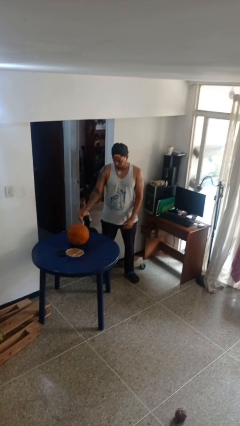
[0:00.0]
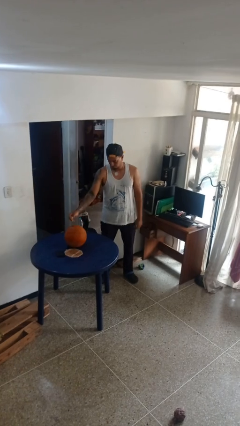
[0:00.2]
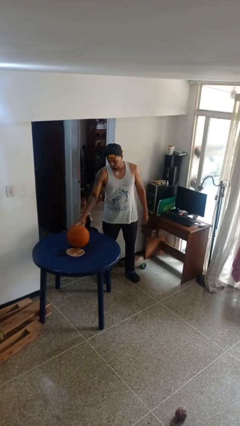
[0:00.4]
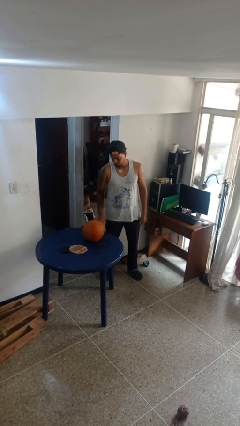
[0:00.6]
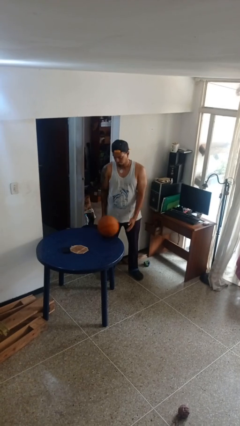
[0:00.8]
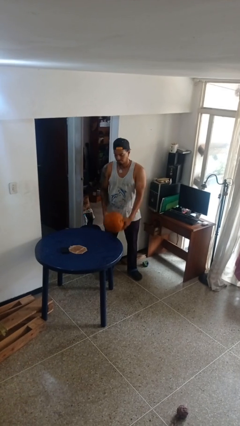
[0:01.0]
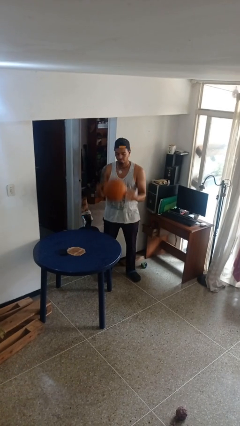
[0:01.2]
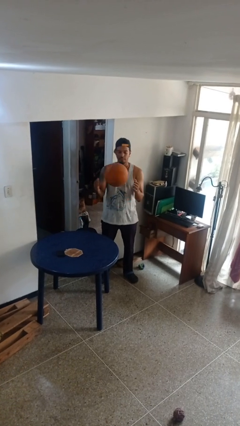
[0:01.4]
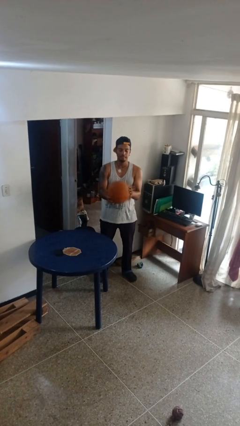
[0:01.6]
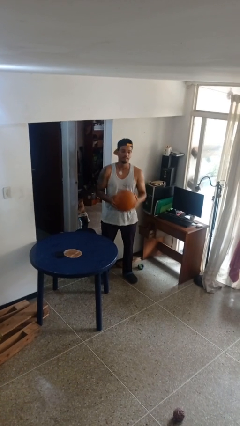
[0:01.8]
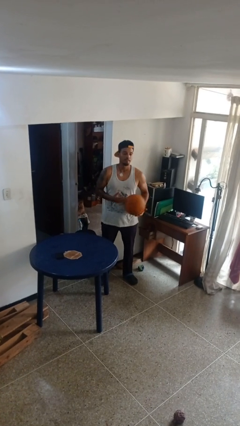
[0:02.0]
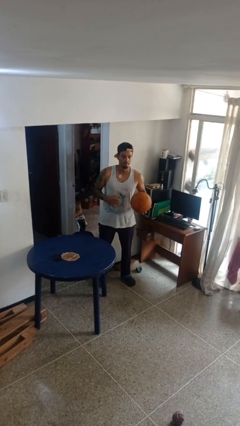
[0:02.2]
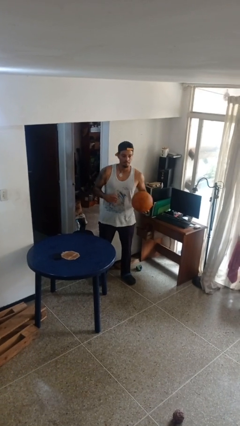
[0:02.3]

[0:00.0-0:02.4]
person picks up object from table

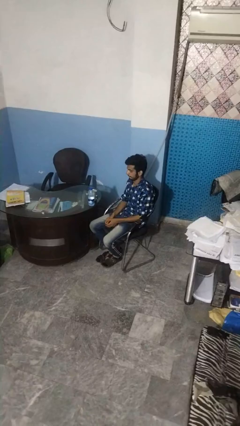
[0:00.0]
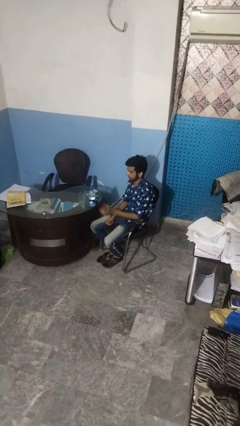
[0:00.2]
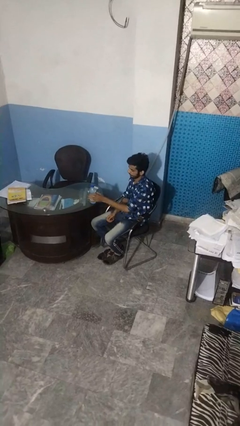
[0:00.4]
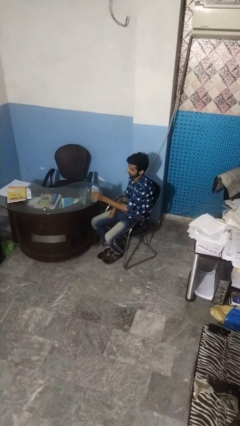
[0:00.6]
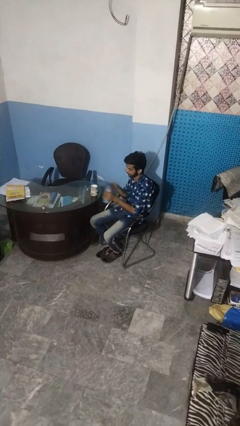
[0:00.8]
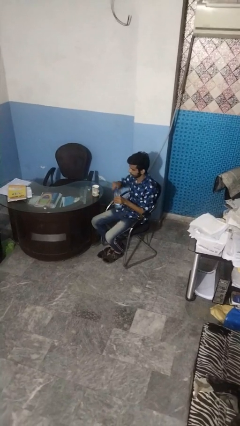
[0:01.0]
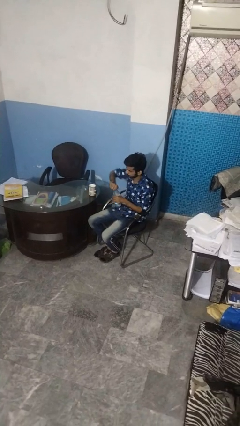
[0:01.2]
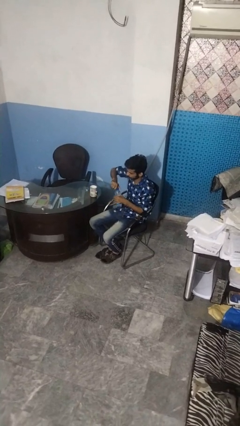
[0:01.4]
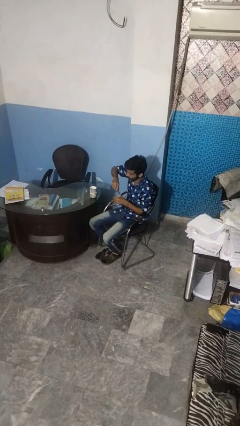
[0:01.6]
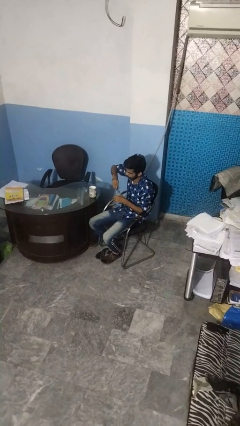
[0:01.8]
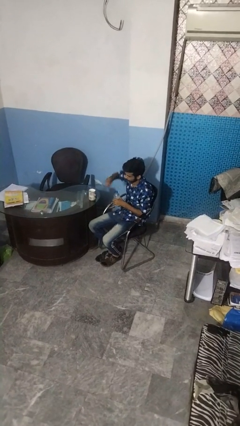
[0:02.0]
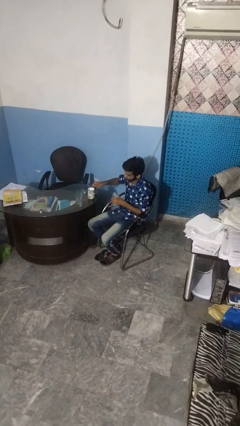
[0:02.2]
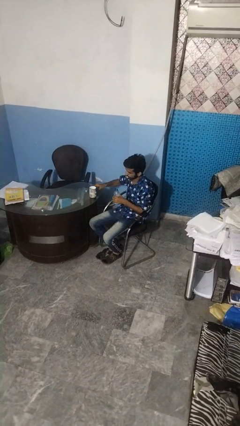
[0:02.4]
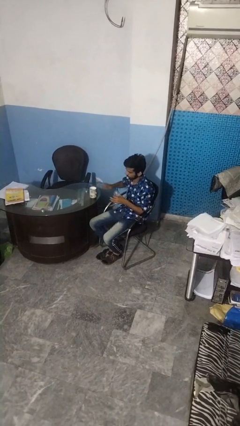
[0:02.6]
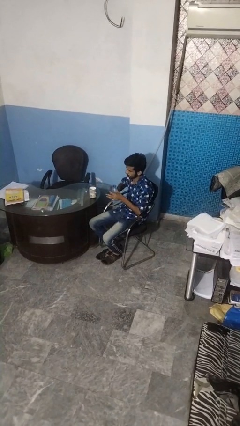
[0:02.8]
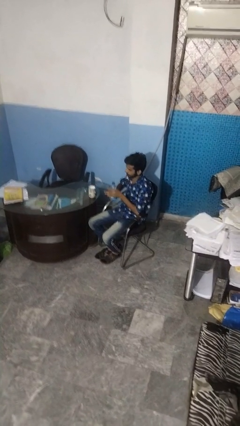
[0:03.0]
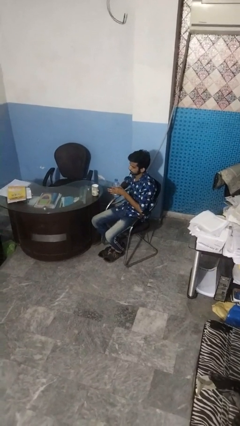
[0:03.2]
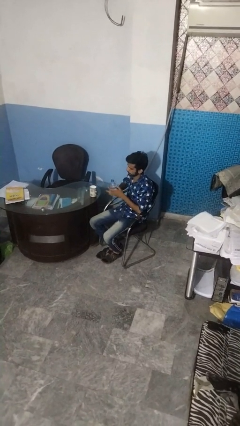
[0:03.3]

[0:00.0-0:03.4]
person unscrews lid from bottle

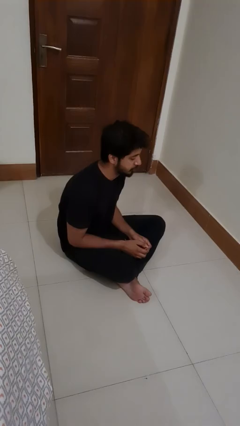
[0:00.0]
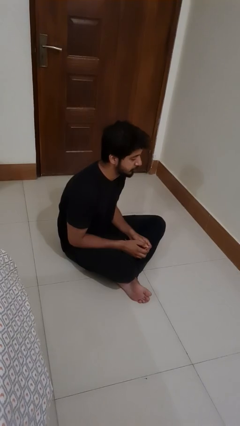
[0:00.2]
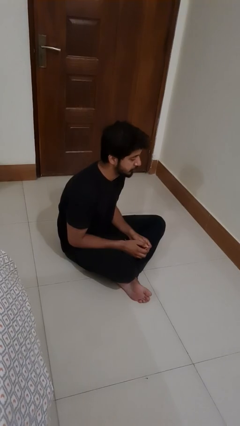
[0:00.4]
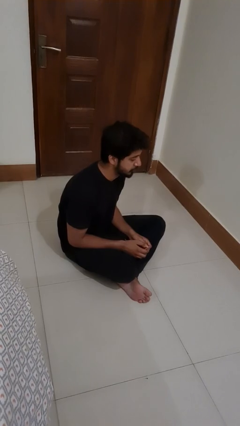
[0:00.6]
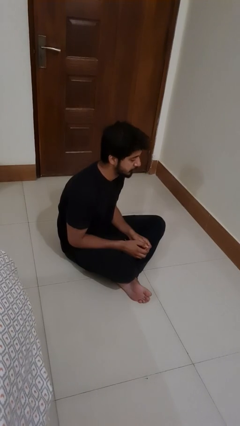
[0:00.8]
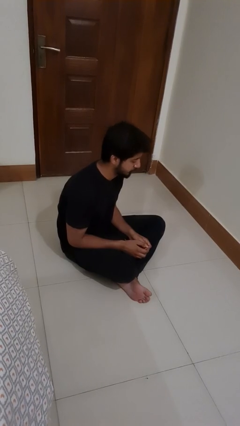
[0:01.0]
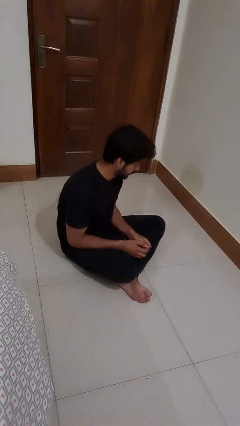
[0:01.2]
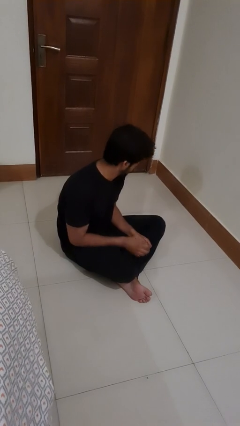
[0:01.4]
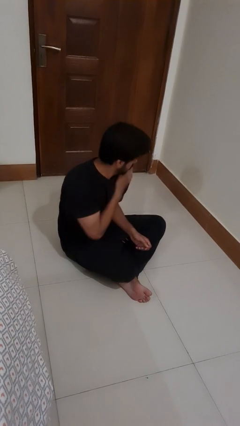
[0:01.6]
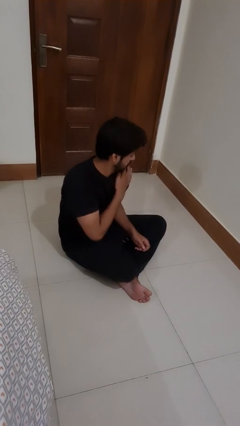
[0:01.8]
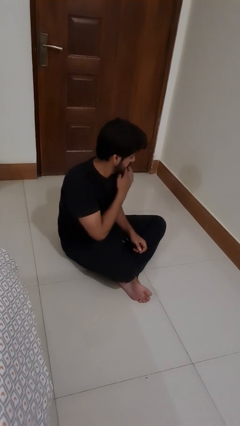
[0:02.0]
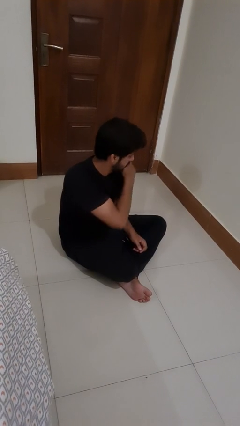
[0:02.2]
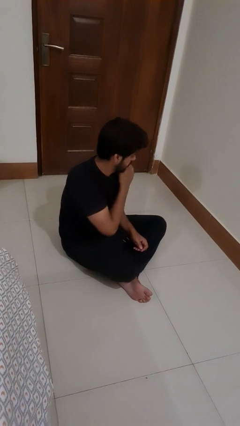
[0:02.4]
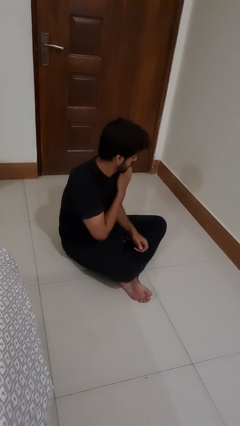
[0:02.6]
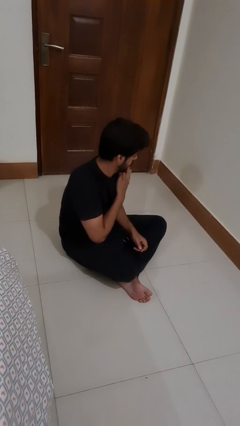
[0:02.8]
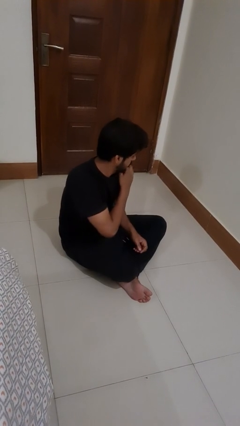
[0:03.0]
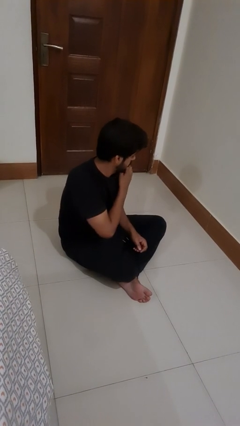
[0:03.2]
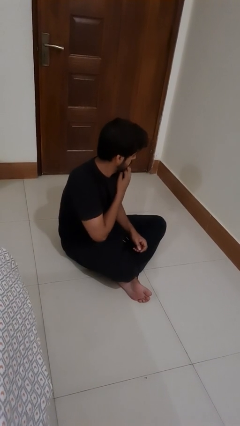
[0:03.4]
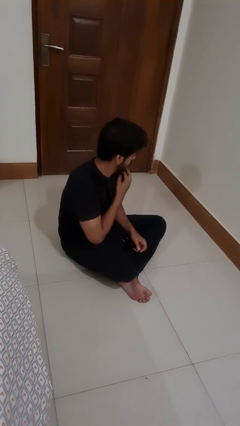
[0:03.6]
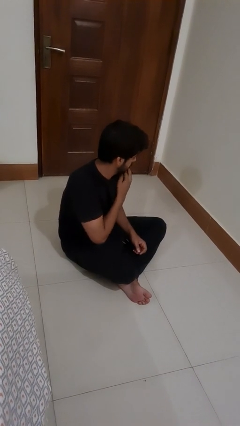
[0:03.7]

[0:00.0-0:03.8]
person swats bug

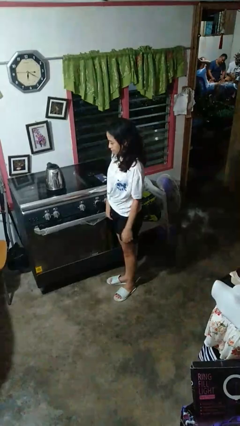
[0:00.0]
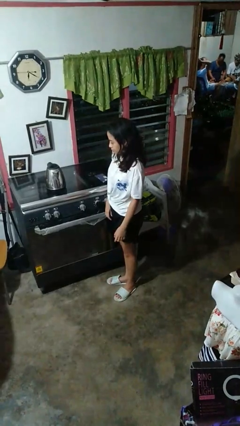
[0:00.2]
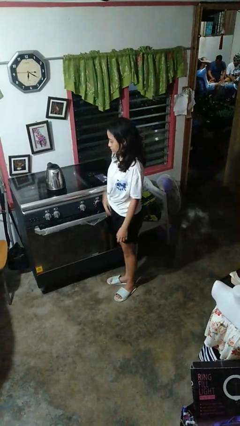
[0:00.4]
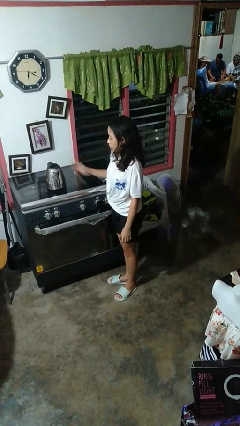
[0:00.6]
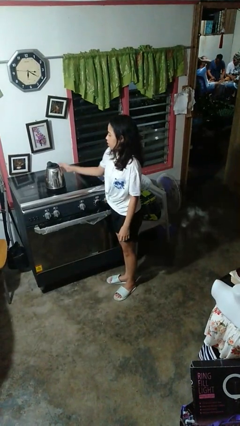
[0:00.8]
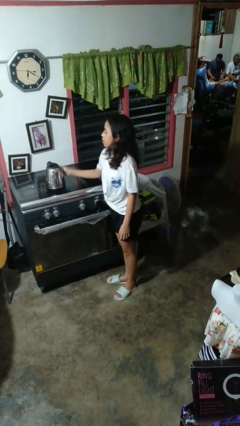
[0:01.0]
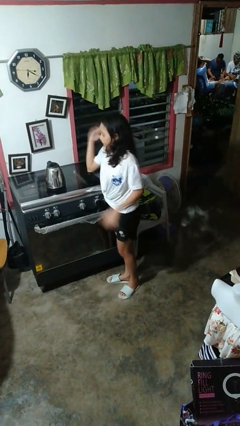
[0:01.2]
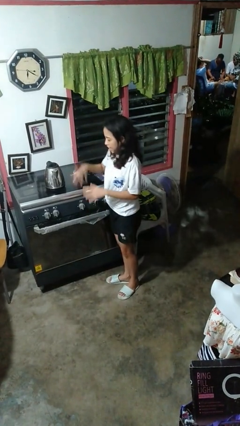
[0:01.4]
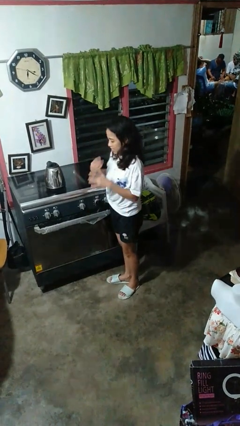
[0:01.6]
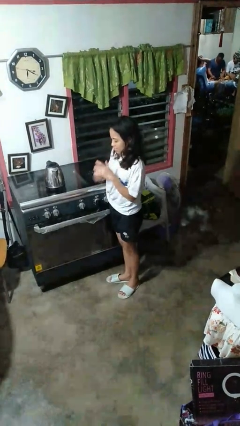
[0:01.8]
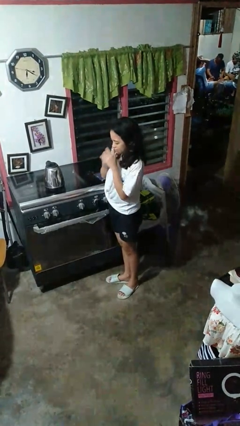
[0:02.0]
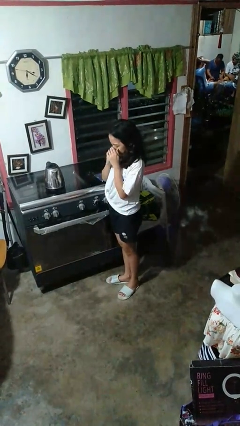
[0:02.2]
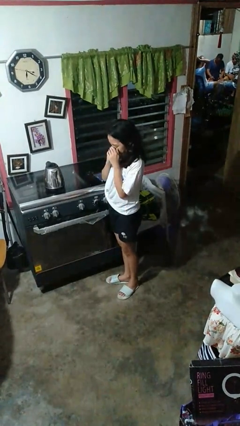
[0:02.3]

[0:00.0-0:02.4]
person burns hand

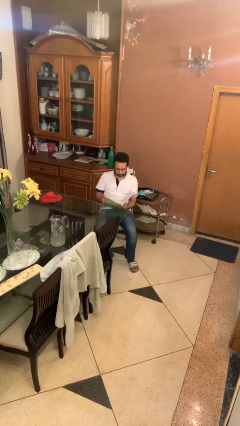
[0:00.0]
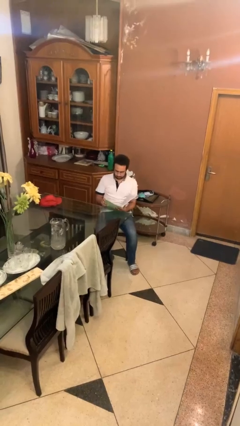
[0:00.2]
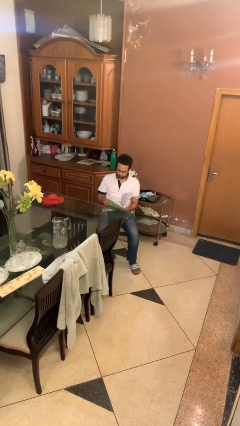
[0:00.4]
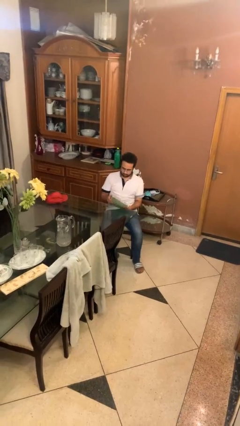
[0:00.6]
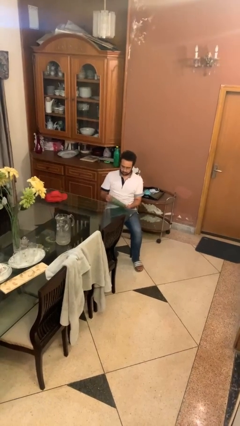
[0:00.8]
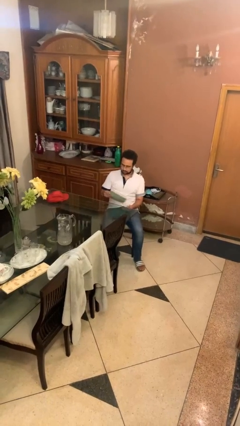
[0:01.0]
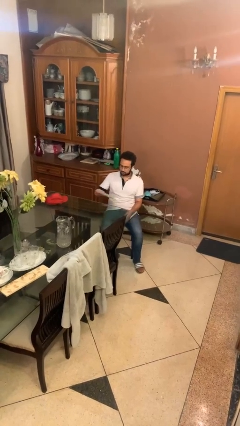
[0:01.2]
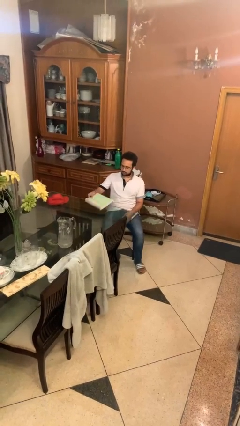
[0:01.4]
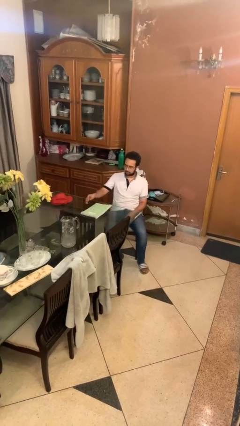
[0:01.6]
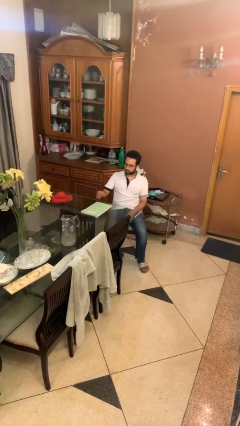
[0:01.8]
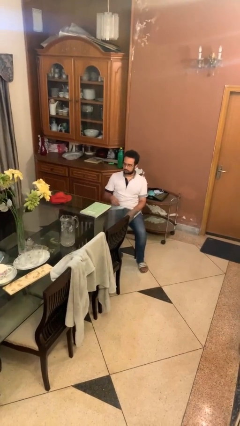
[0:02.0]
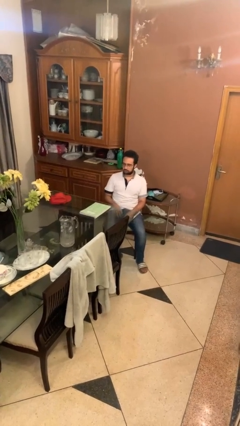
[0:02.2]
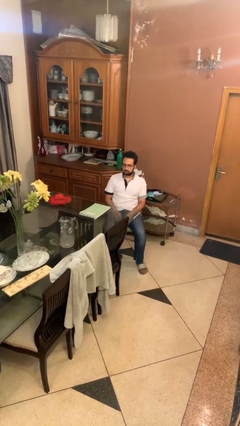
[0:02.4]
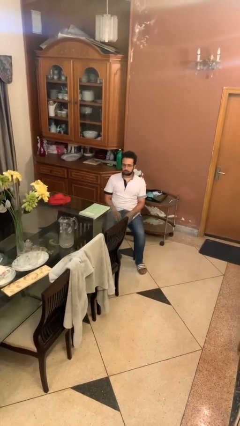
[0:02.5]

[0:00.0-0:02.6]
person puts down object on table

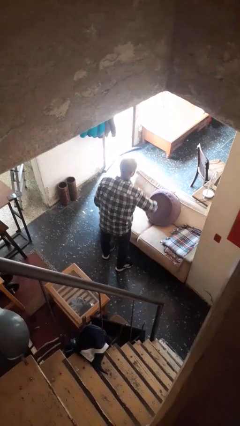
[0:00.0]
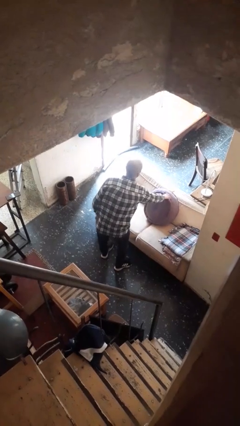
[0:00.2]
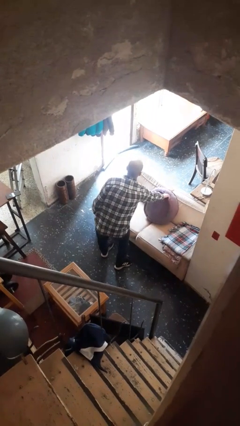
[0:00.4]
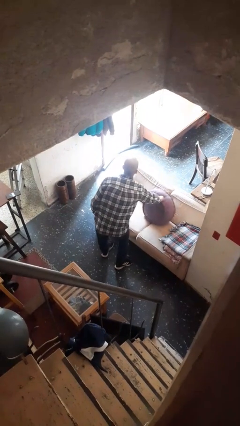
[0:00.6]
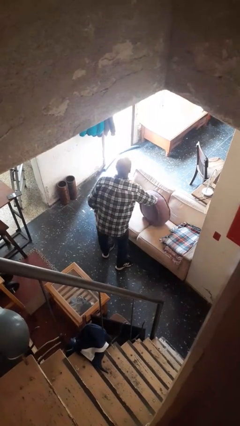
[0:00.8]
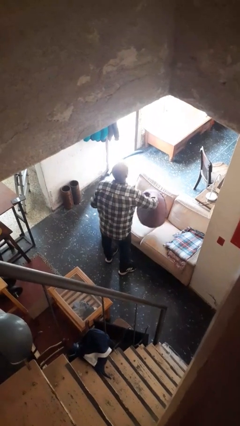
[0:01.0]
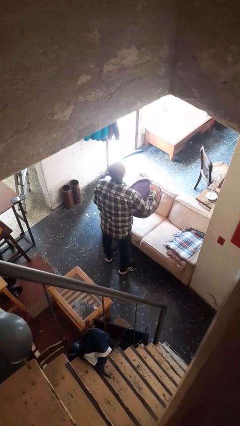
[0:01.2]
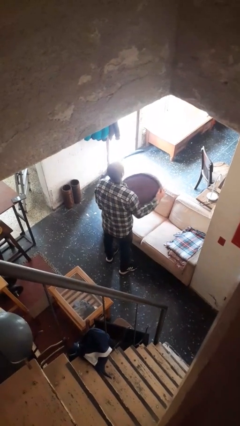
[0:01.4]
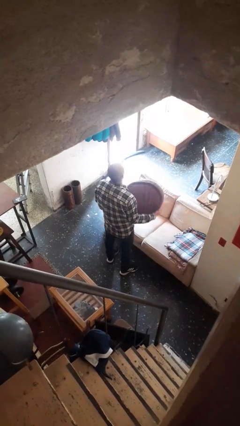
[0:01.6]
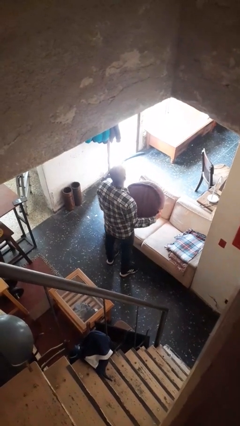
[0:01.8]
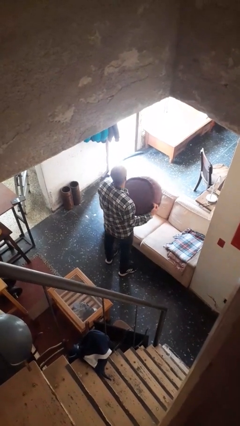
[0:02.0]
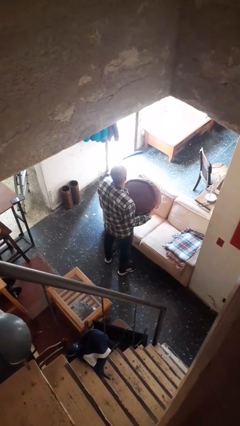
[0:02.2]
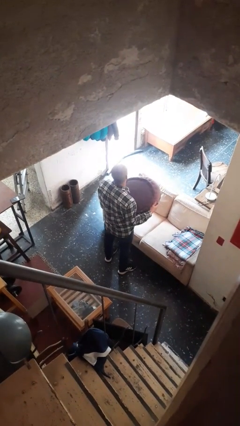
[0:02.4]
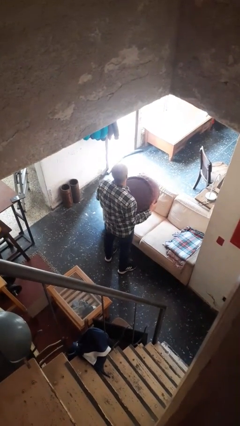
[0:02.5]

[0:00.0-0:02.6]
person picks up object from couch
